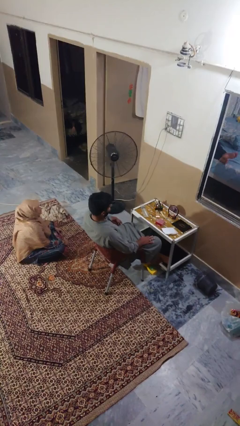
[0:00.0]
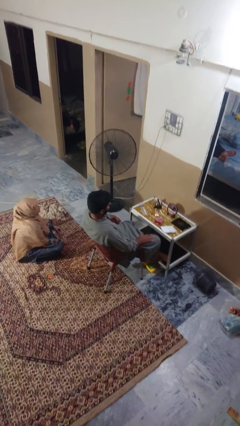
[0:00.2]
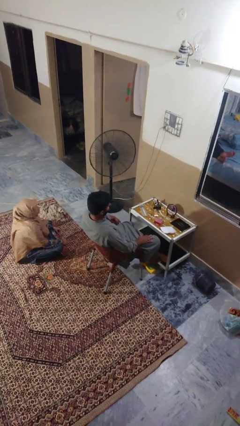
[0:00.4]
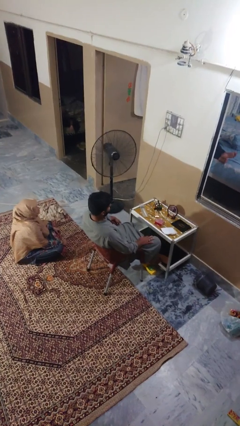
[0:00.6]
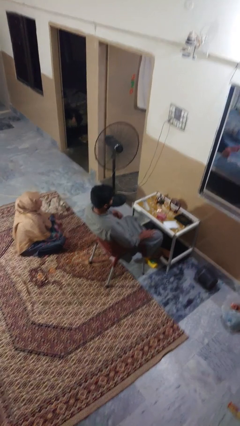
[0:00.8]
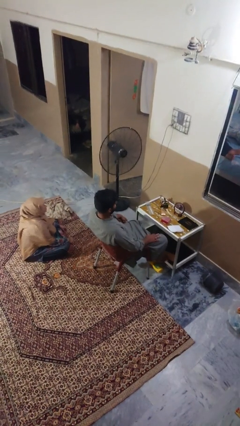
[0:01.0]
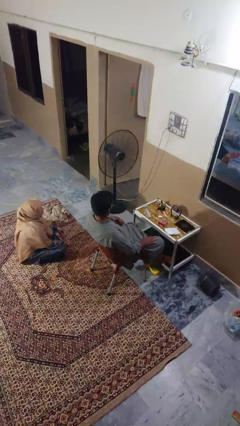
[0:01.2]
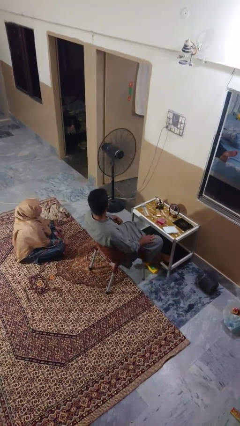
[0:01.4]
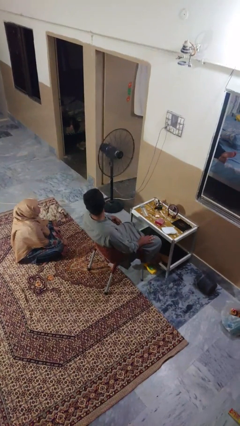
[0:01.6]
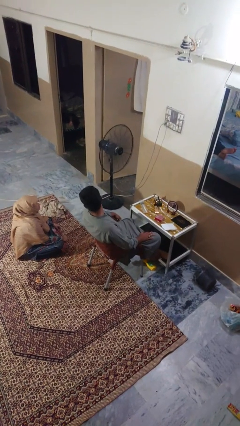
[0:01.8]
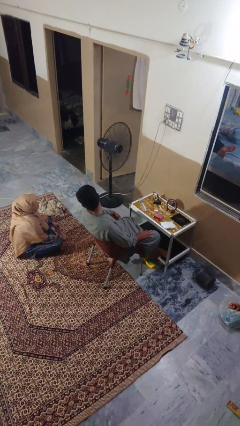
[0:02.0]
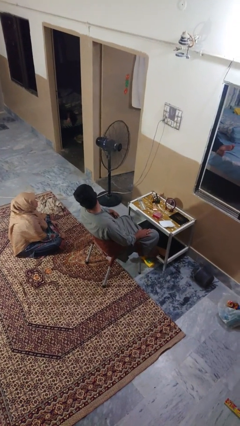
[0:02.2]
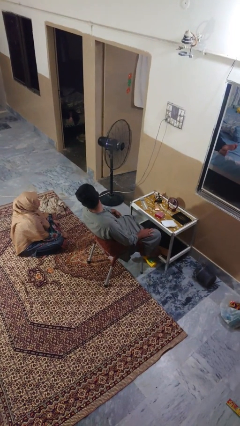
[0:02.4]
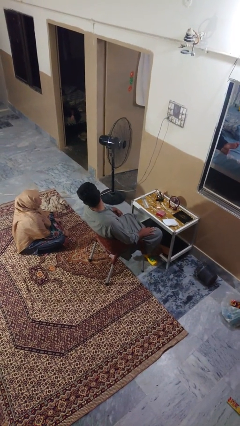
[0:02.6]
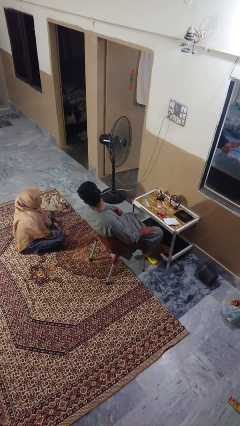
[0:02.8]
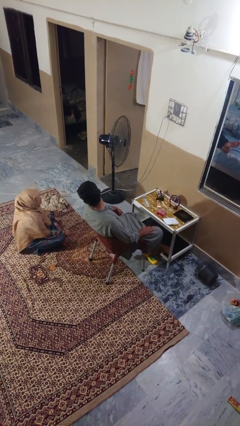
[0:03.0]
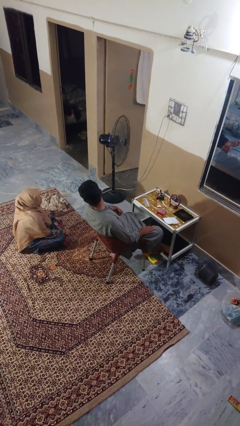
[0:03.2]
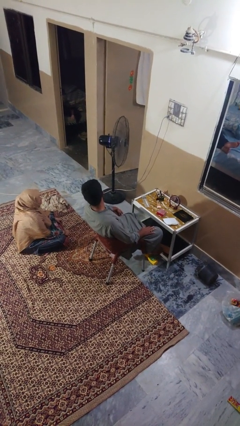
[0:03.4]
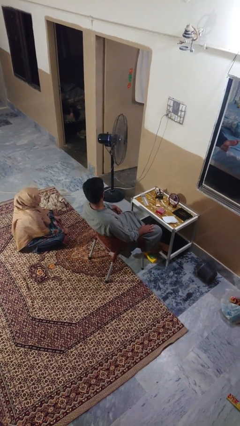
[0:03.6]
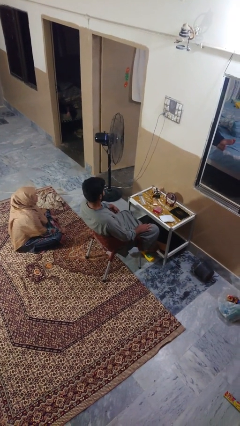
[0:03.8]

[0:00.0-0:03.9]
person looks over shoulder

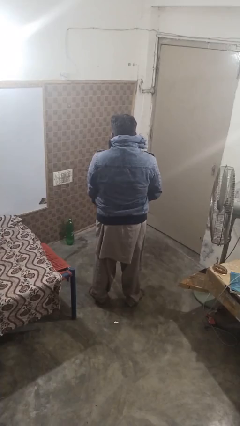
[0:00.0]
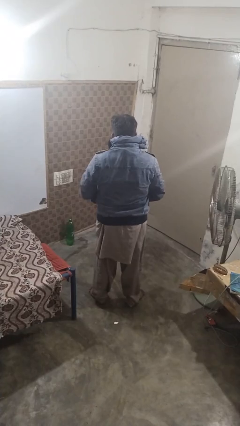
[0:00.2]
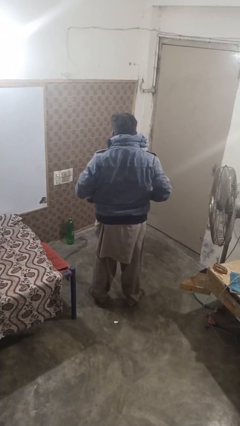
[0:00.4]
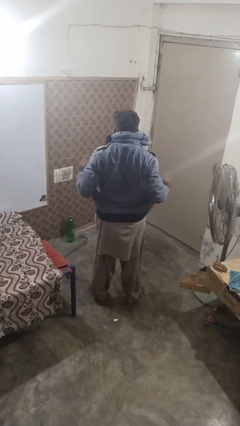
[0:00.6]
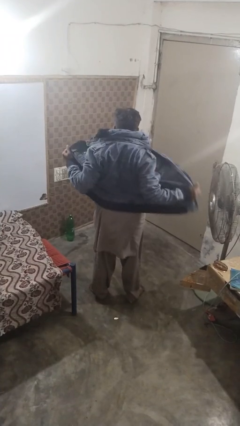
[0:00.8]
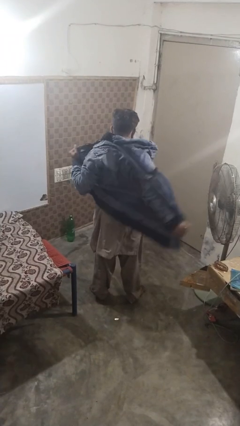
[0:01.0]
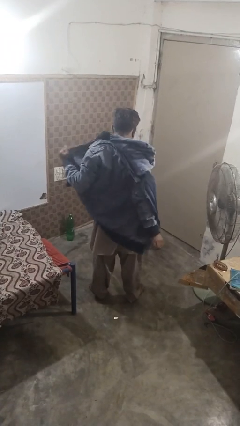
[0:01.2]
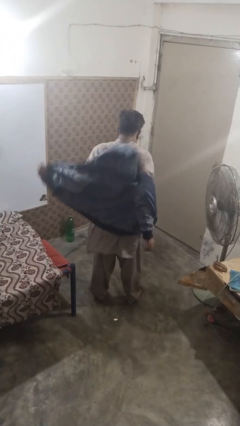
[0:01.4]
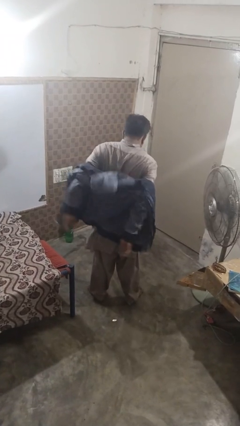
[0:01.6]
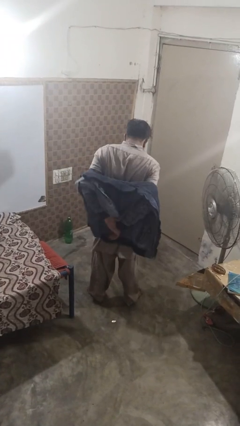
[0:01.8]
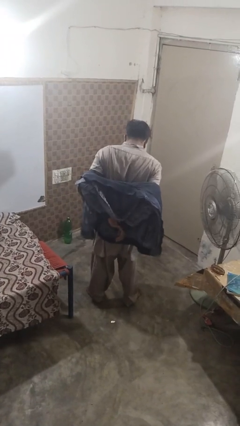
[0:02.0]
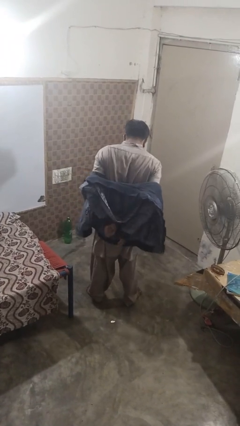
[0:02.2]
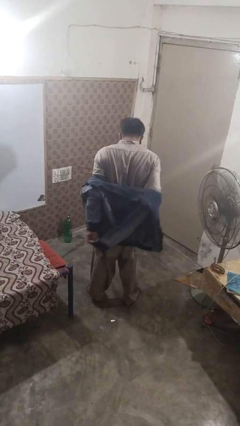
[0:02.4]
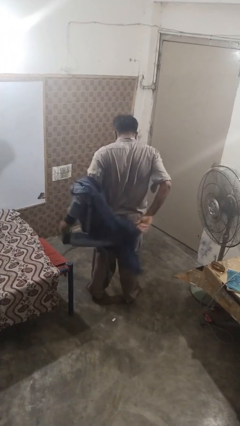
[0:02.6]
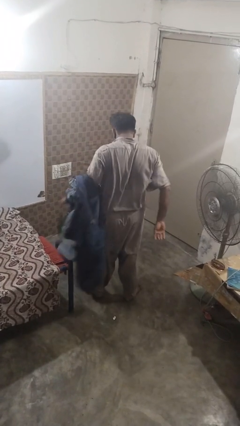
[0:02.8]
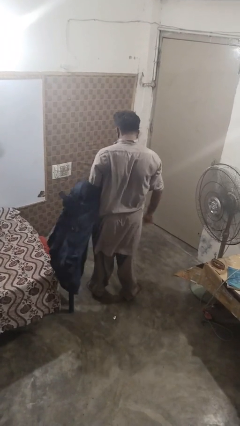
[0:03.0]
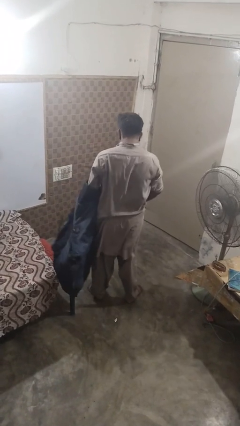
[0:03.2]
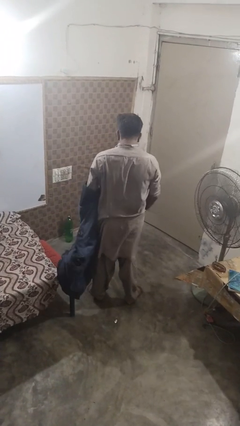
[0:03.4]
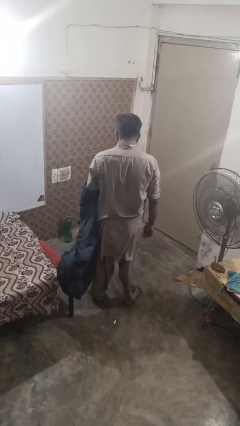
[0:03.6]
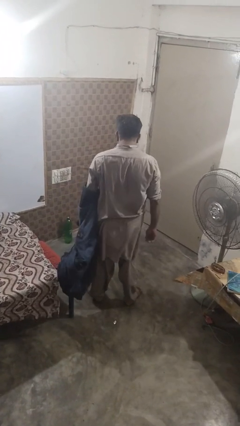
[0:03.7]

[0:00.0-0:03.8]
person takes off jacket

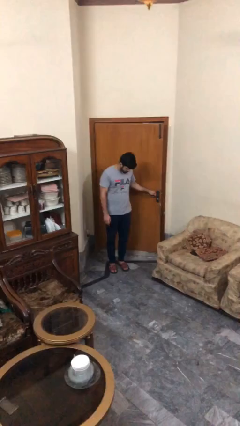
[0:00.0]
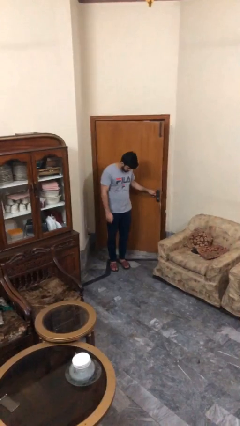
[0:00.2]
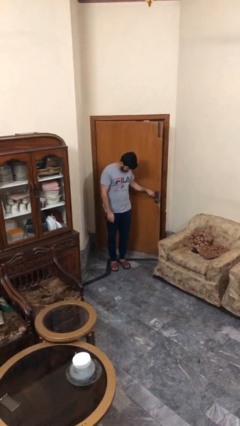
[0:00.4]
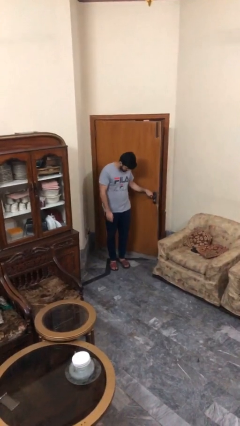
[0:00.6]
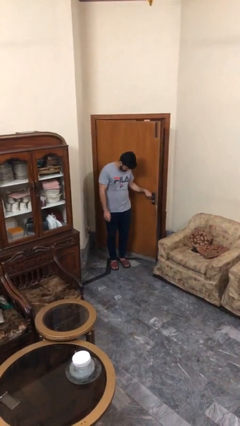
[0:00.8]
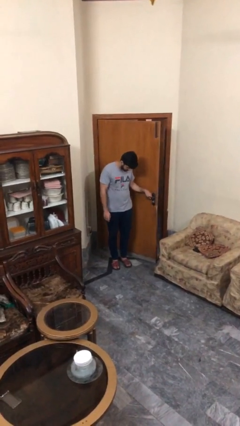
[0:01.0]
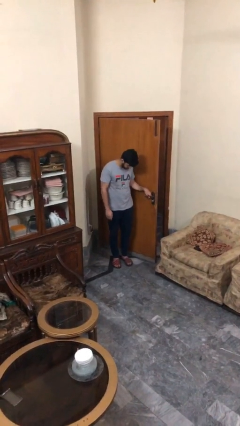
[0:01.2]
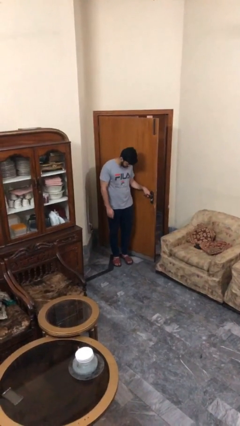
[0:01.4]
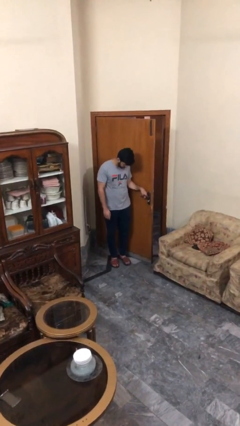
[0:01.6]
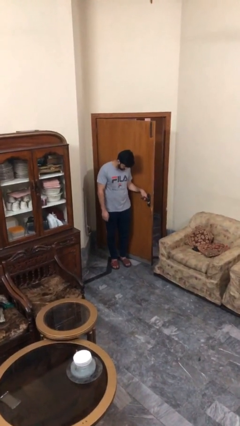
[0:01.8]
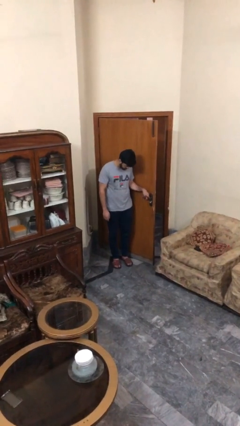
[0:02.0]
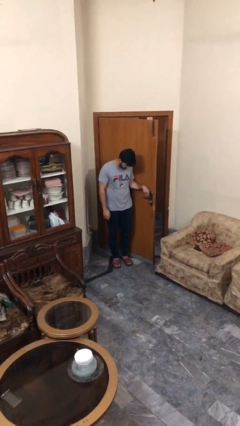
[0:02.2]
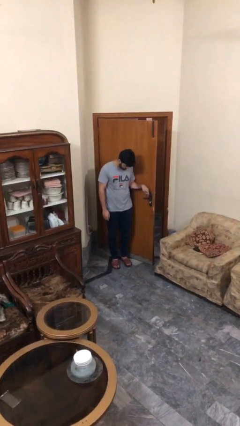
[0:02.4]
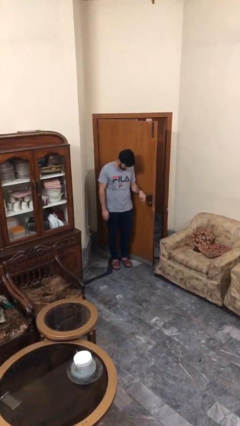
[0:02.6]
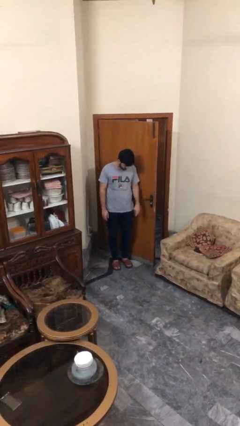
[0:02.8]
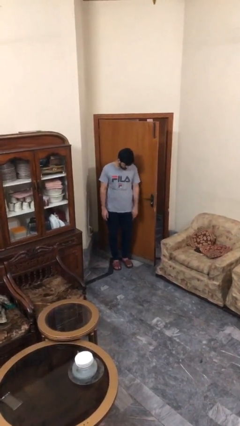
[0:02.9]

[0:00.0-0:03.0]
person opens facility door

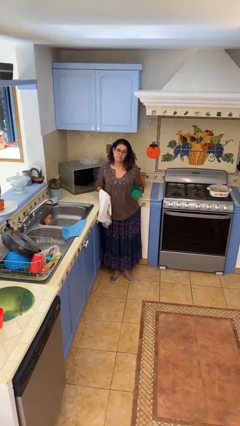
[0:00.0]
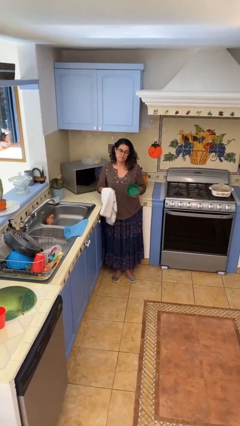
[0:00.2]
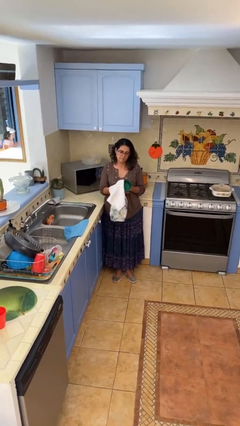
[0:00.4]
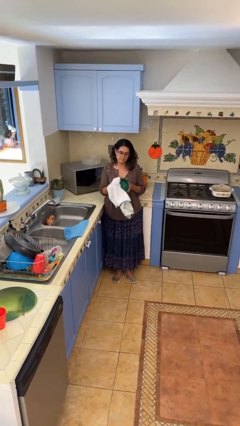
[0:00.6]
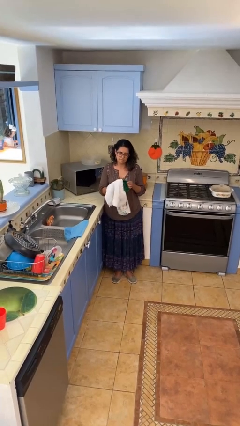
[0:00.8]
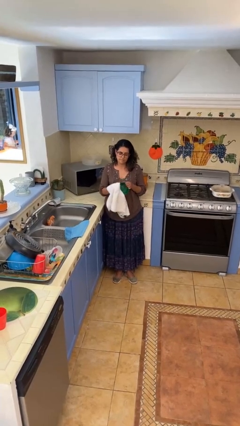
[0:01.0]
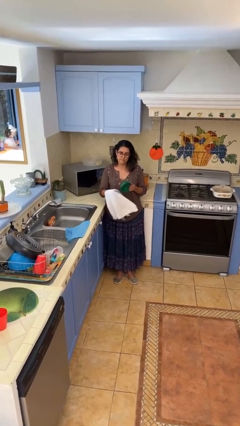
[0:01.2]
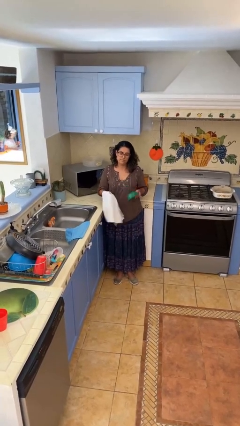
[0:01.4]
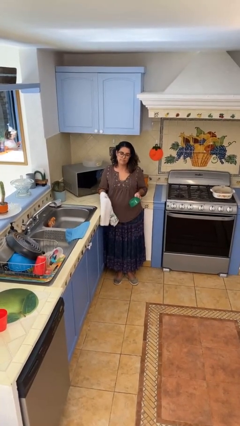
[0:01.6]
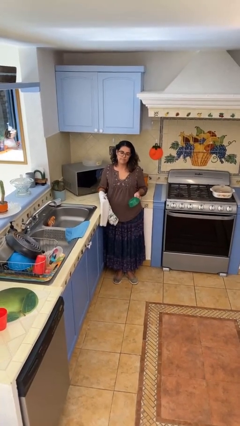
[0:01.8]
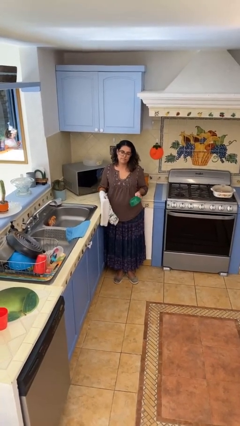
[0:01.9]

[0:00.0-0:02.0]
person dries dish

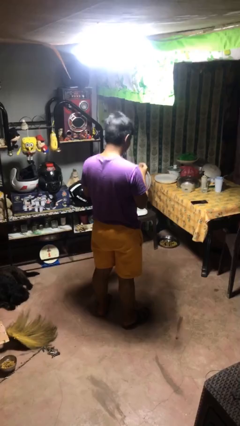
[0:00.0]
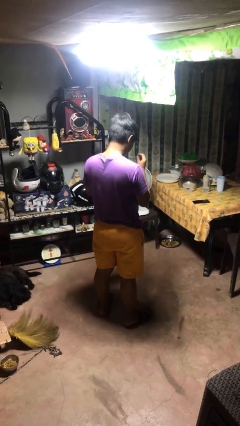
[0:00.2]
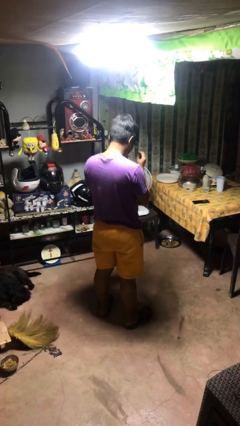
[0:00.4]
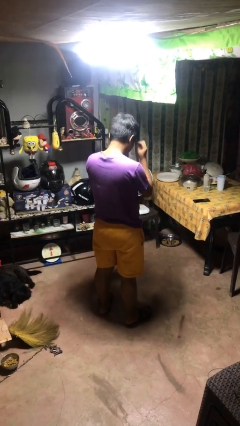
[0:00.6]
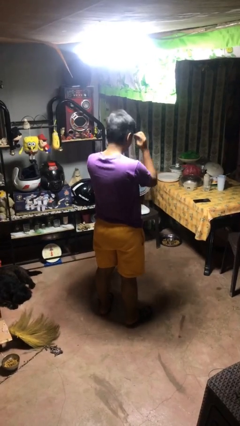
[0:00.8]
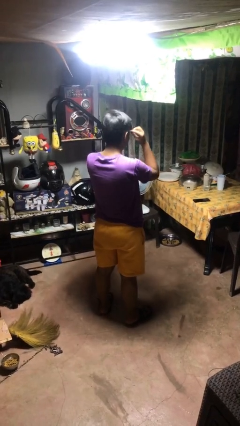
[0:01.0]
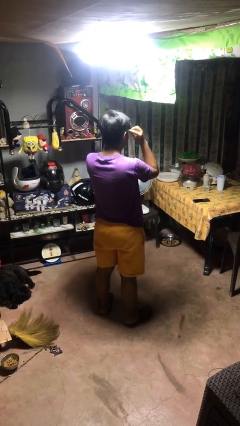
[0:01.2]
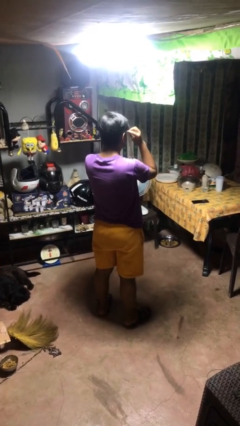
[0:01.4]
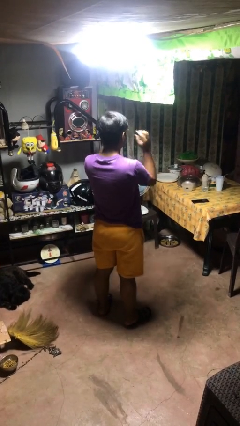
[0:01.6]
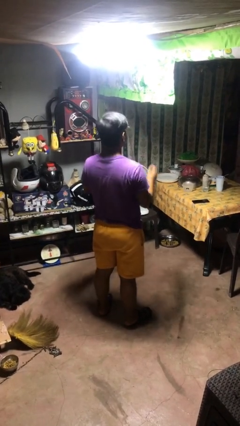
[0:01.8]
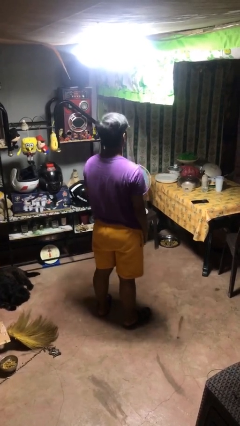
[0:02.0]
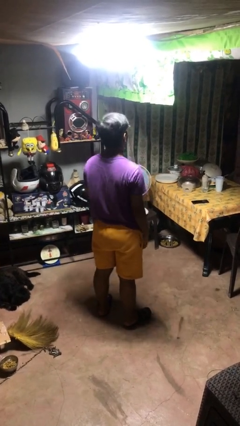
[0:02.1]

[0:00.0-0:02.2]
person puts on glasses

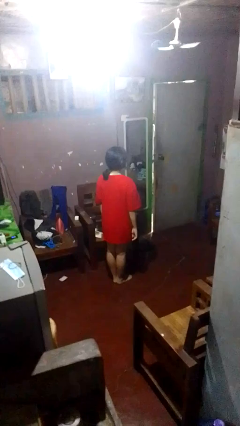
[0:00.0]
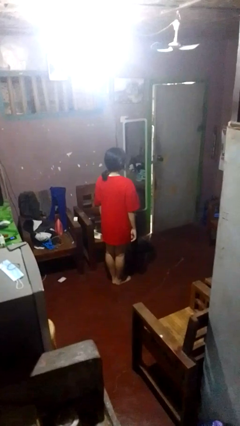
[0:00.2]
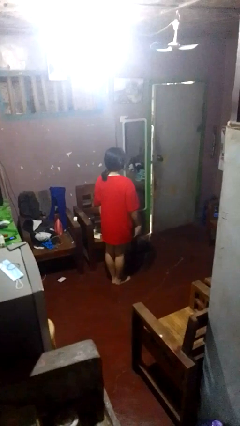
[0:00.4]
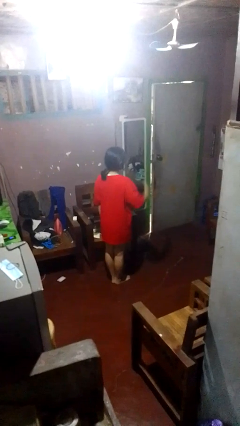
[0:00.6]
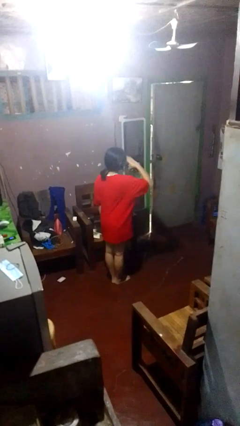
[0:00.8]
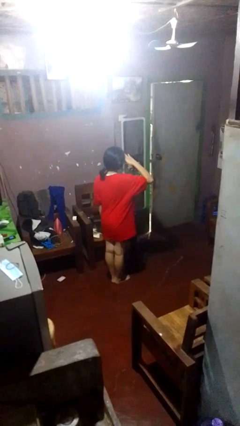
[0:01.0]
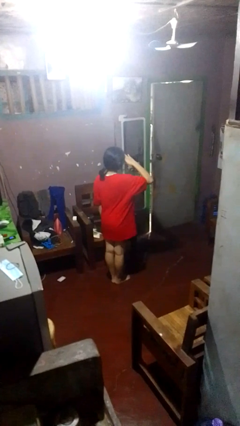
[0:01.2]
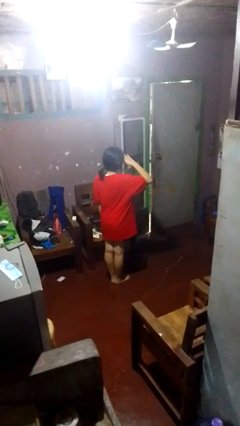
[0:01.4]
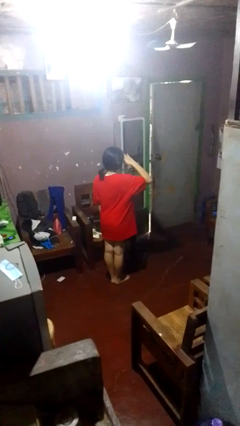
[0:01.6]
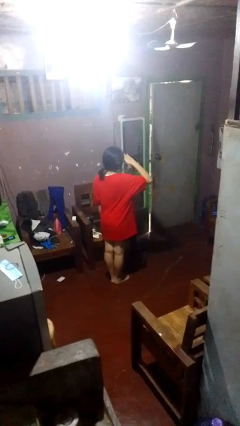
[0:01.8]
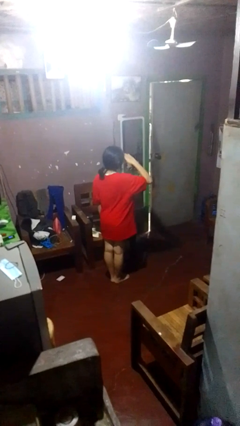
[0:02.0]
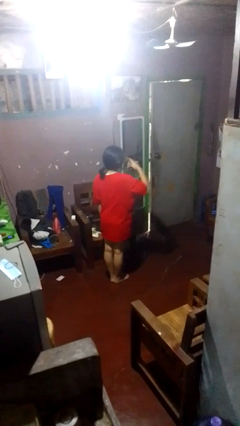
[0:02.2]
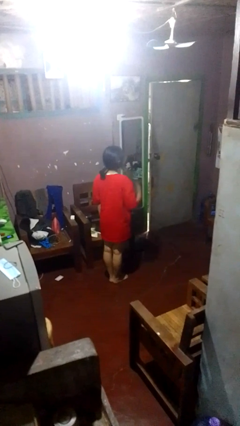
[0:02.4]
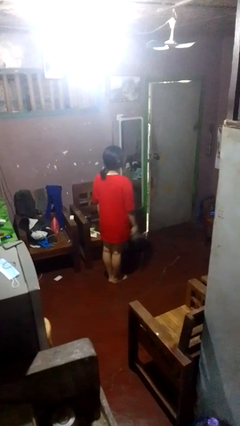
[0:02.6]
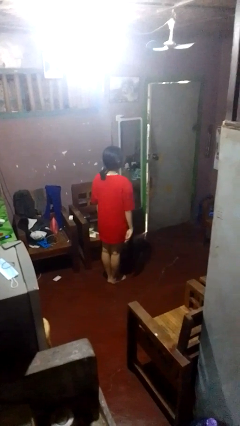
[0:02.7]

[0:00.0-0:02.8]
person salutes

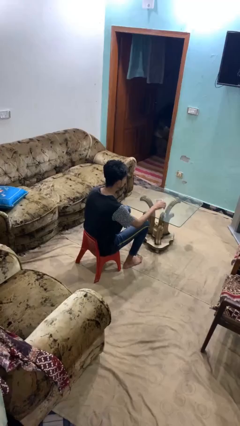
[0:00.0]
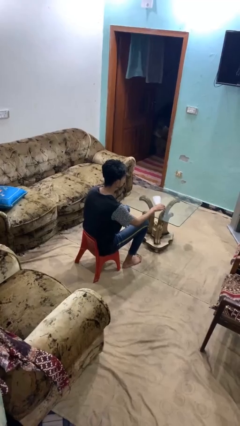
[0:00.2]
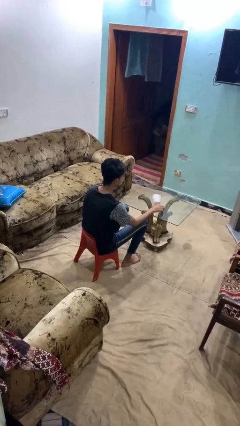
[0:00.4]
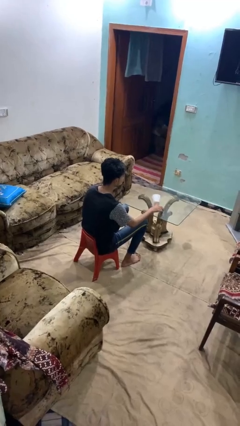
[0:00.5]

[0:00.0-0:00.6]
person knocks over glass
